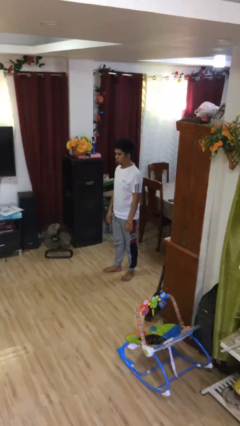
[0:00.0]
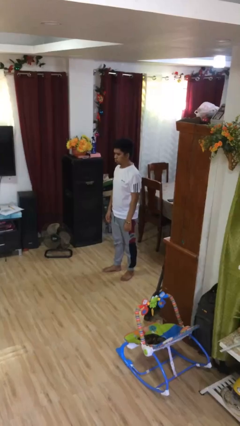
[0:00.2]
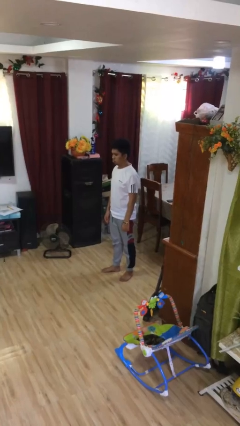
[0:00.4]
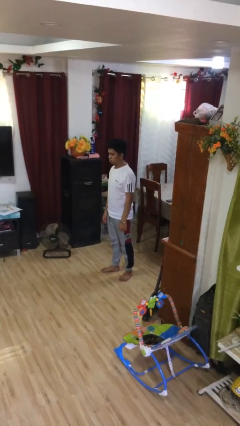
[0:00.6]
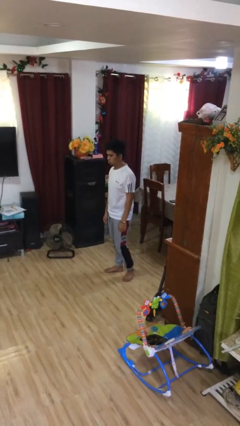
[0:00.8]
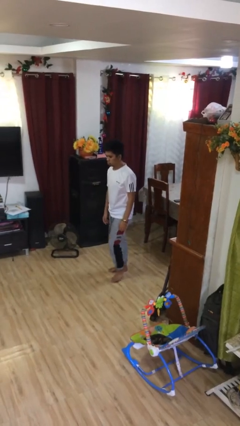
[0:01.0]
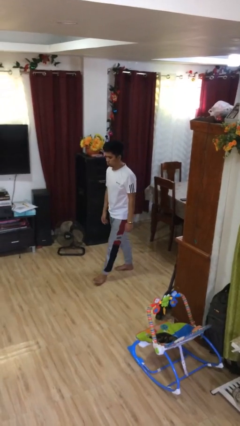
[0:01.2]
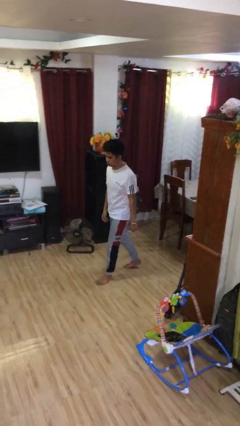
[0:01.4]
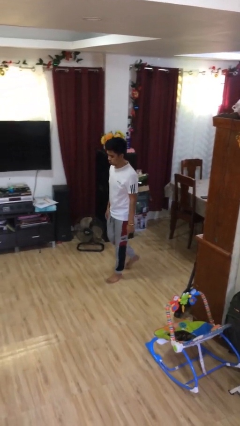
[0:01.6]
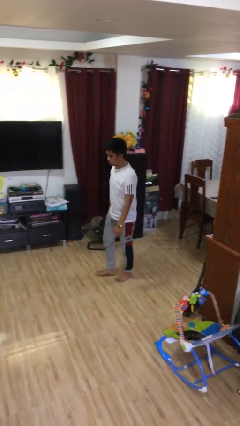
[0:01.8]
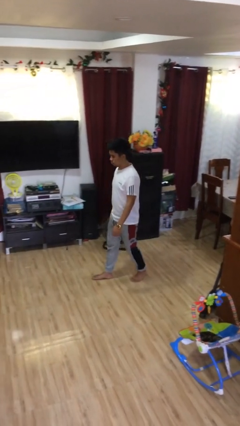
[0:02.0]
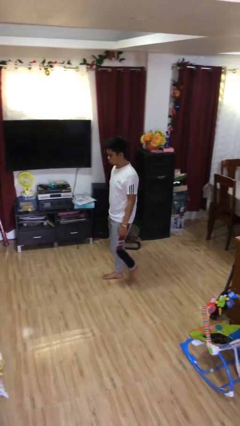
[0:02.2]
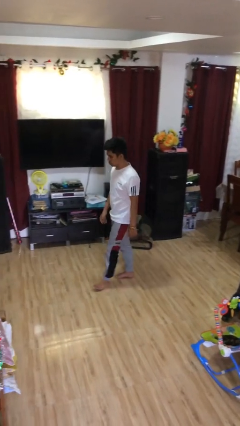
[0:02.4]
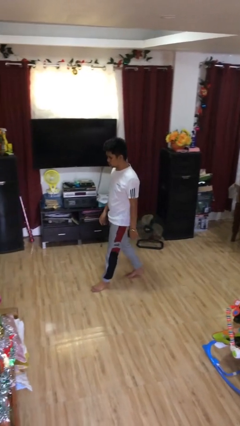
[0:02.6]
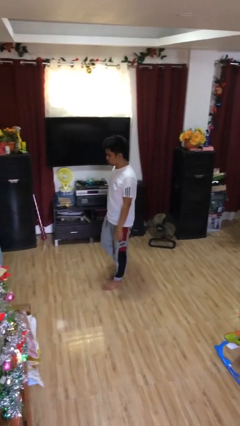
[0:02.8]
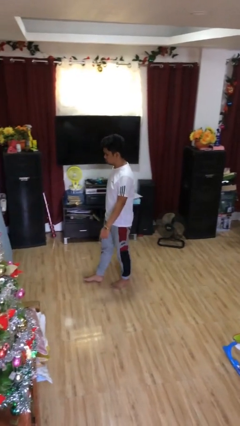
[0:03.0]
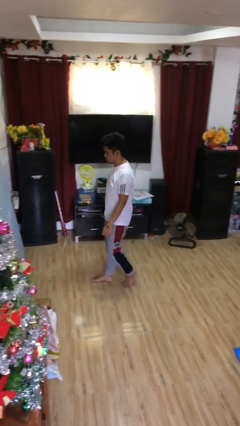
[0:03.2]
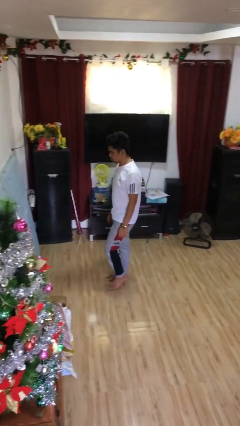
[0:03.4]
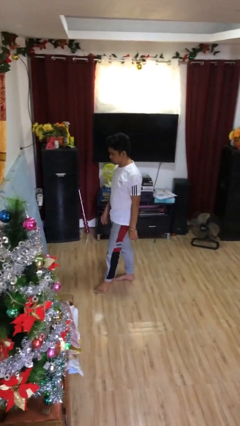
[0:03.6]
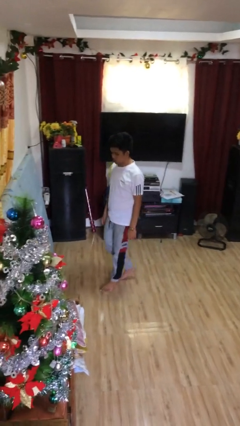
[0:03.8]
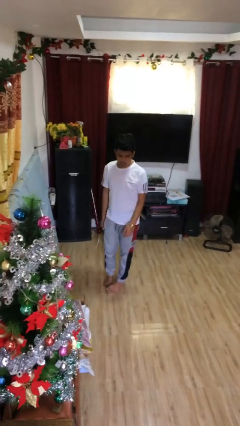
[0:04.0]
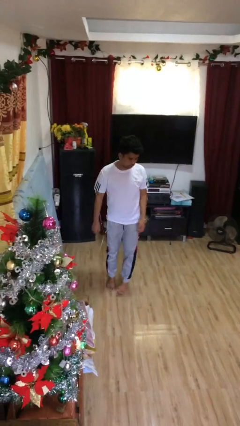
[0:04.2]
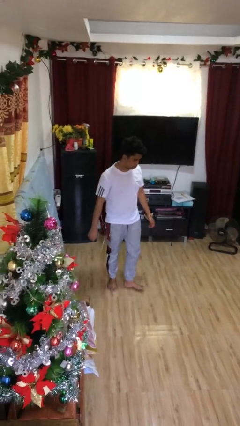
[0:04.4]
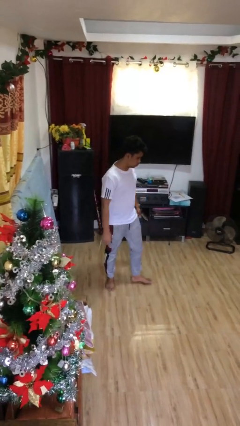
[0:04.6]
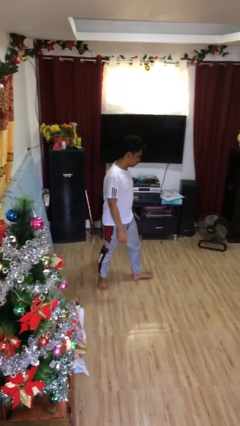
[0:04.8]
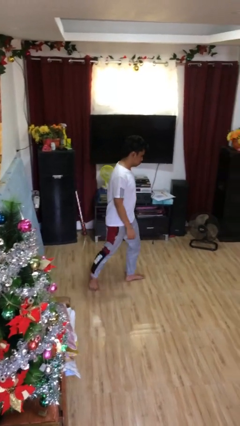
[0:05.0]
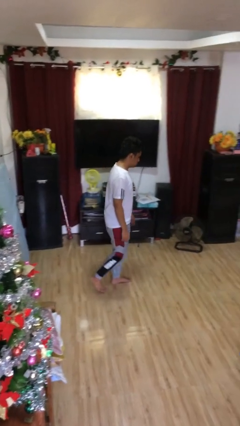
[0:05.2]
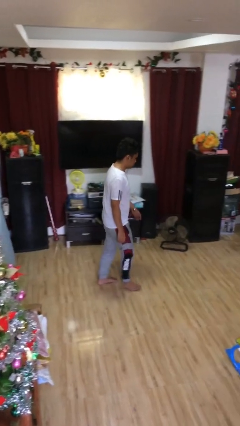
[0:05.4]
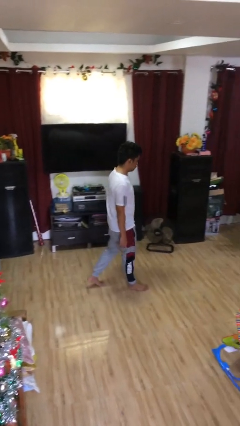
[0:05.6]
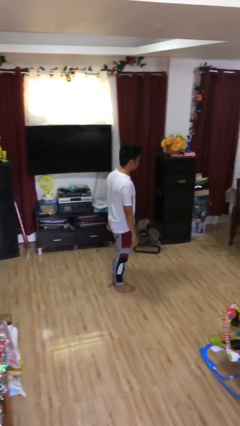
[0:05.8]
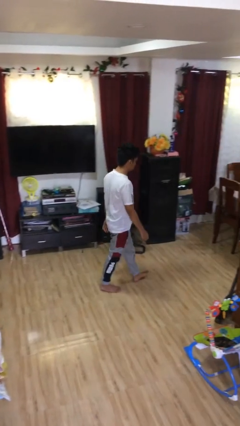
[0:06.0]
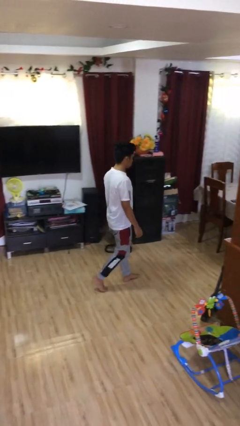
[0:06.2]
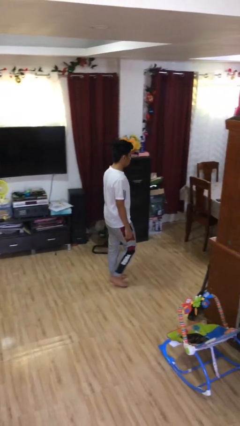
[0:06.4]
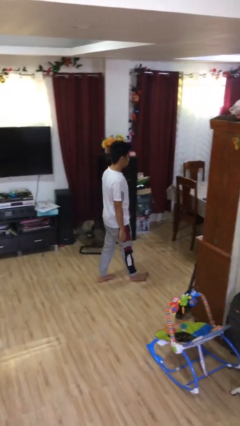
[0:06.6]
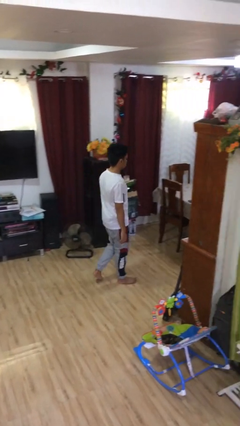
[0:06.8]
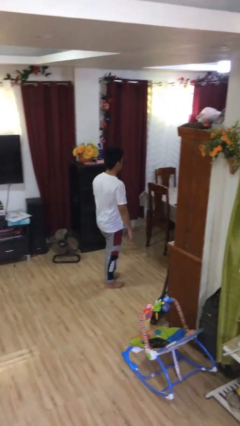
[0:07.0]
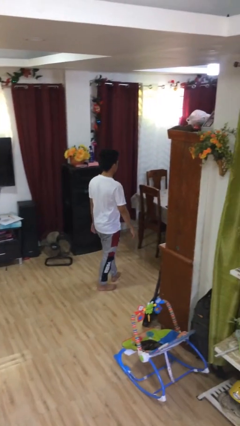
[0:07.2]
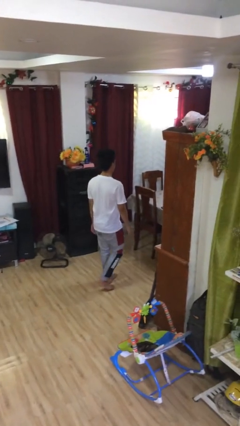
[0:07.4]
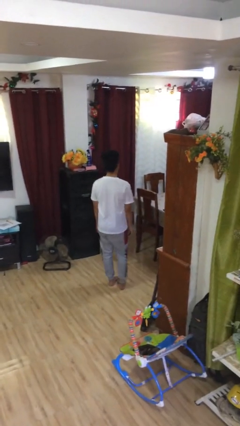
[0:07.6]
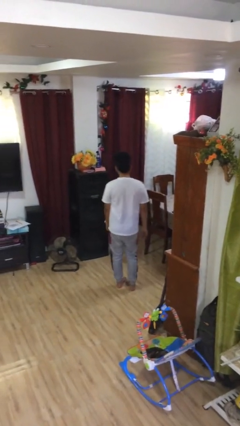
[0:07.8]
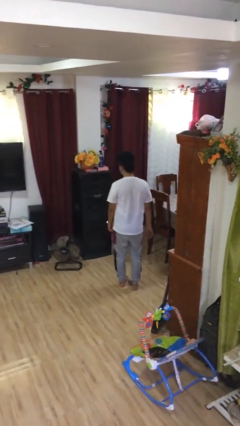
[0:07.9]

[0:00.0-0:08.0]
person walks

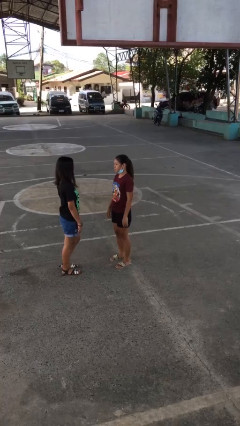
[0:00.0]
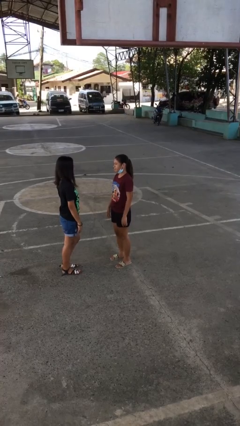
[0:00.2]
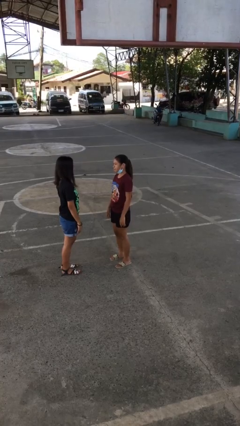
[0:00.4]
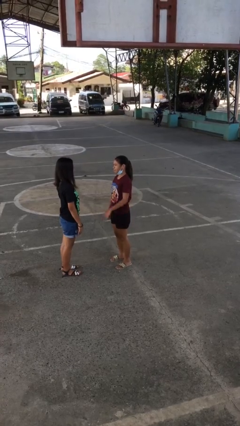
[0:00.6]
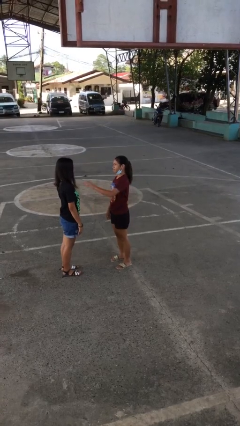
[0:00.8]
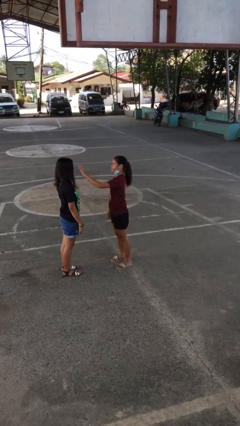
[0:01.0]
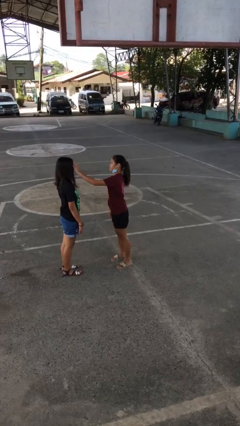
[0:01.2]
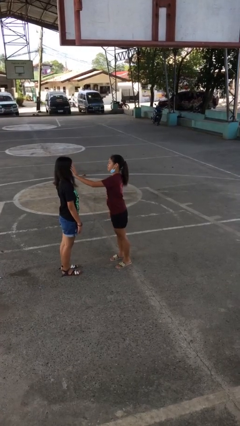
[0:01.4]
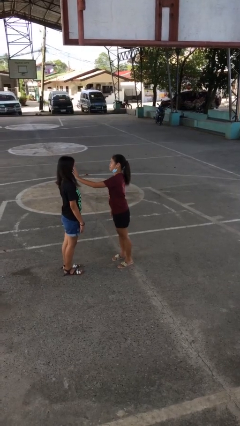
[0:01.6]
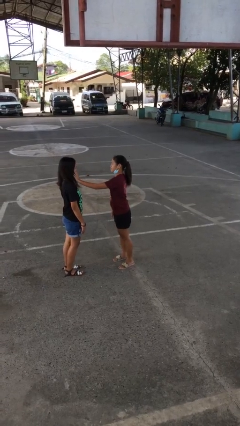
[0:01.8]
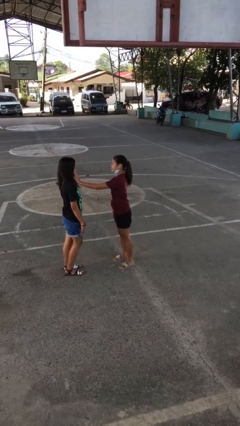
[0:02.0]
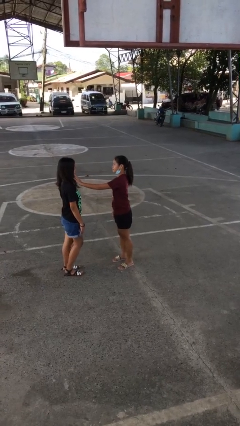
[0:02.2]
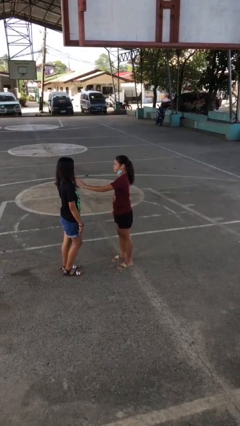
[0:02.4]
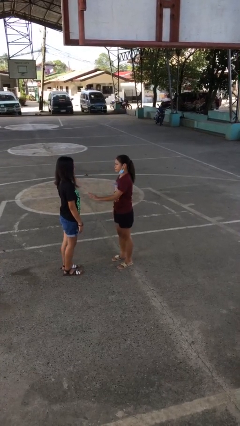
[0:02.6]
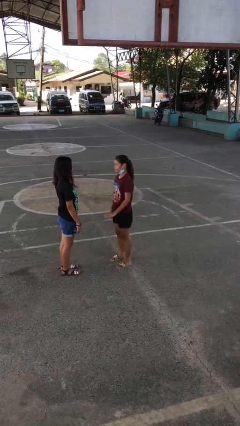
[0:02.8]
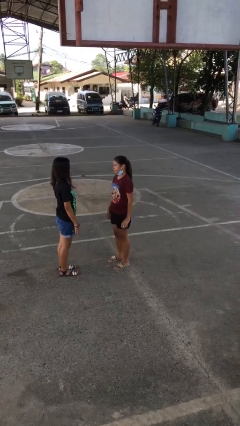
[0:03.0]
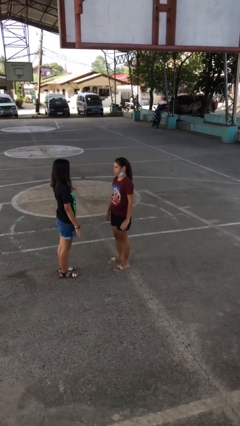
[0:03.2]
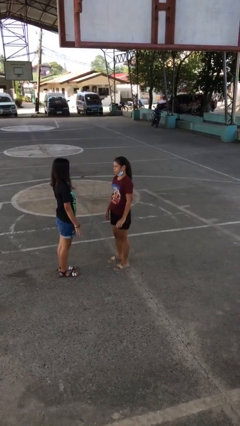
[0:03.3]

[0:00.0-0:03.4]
person touches face of person

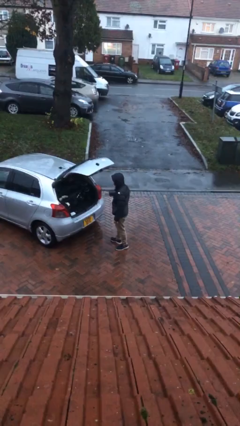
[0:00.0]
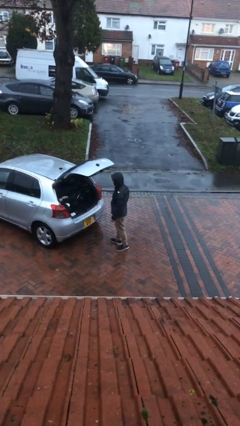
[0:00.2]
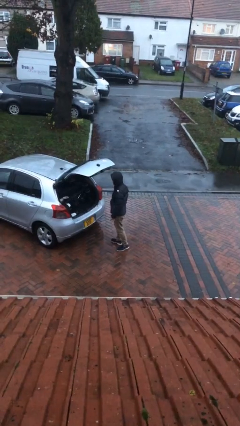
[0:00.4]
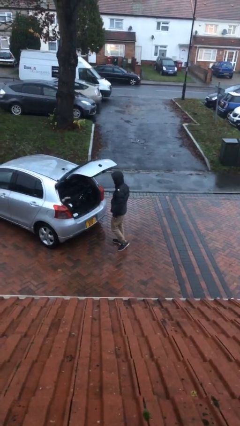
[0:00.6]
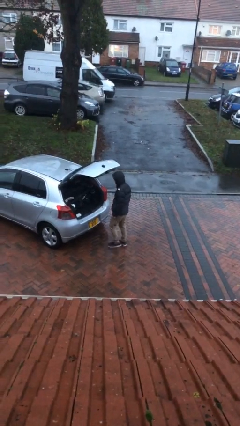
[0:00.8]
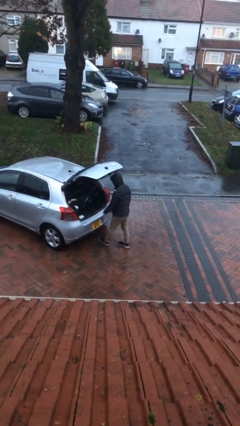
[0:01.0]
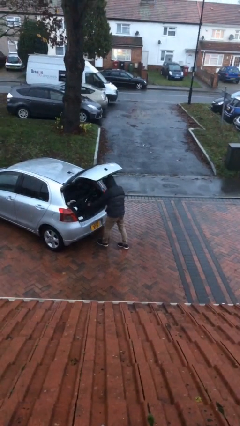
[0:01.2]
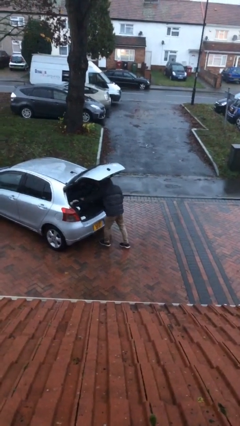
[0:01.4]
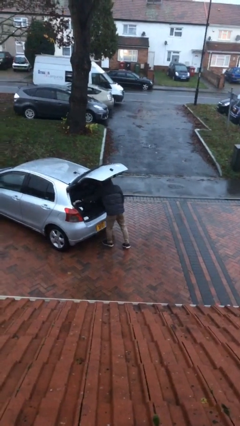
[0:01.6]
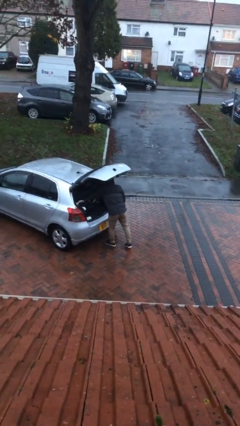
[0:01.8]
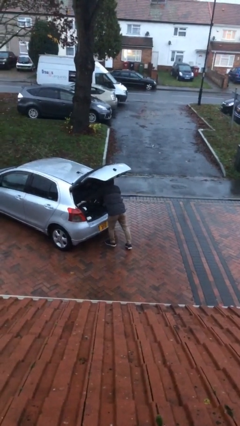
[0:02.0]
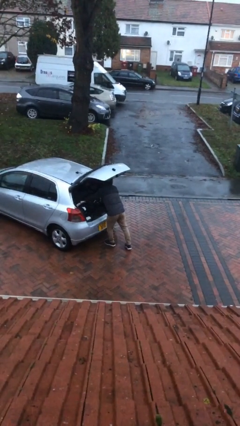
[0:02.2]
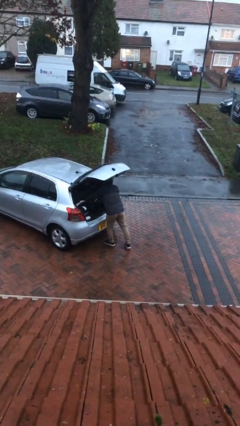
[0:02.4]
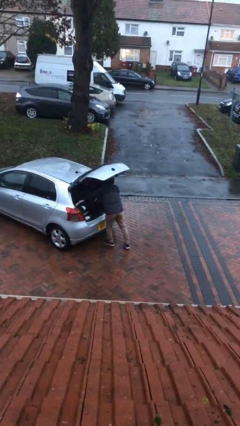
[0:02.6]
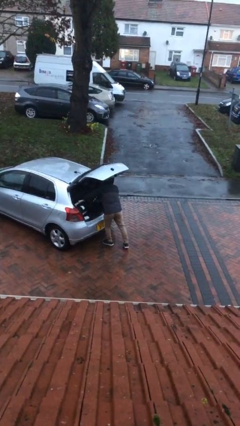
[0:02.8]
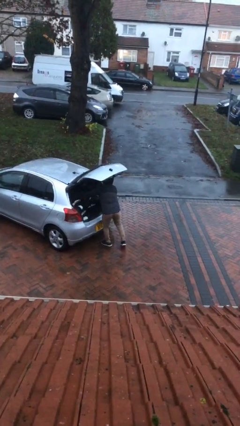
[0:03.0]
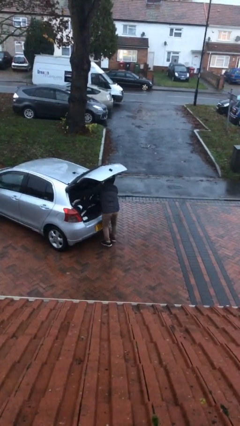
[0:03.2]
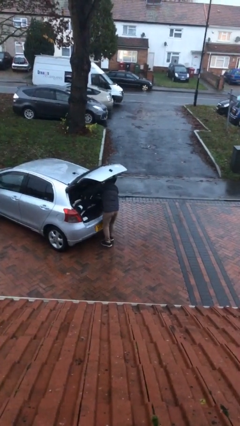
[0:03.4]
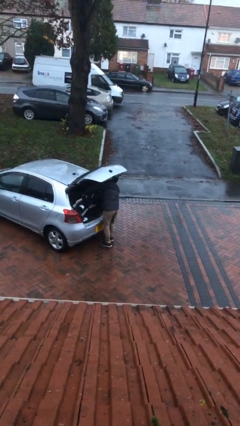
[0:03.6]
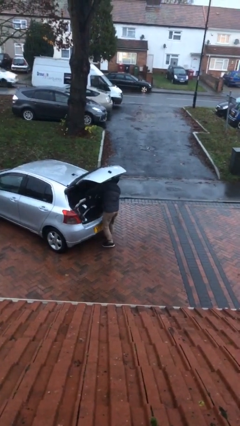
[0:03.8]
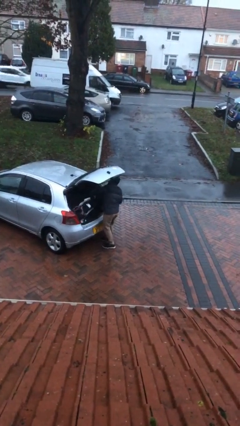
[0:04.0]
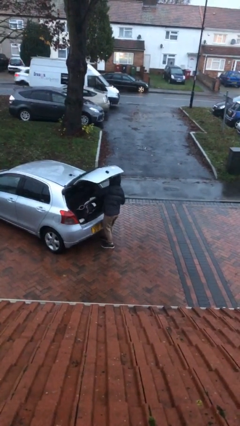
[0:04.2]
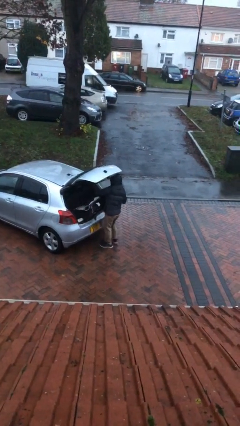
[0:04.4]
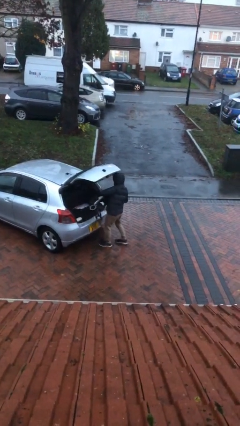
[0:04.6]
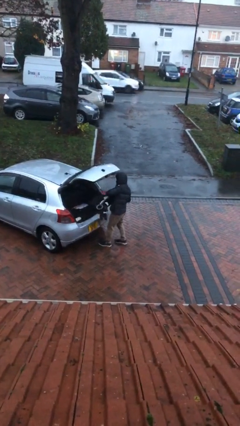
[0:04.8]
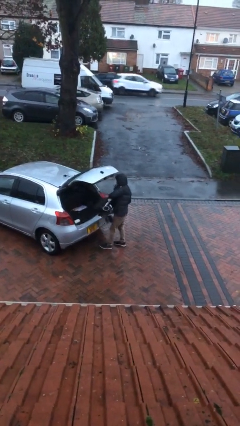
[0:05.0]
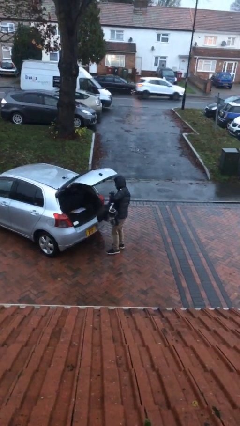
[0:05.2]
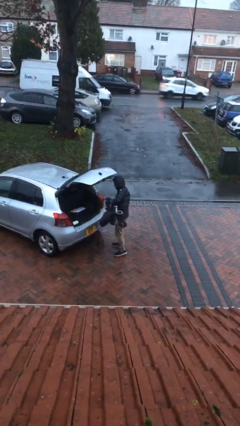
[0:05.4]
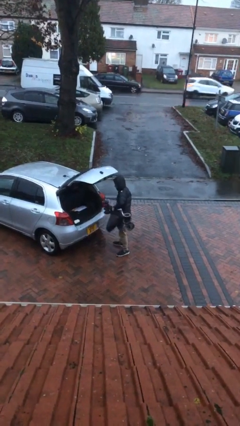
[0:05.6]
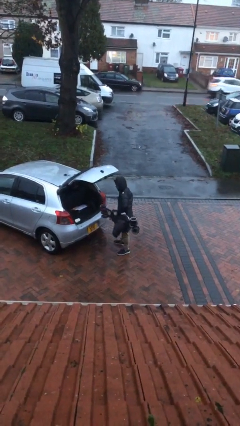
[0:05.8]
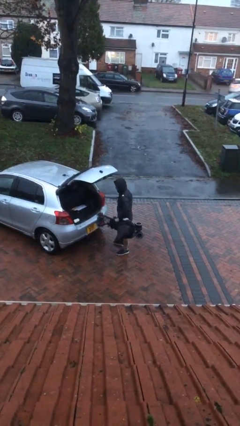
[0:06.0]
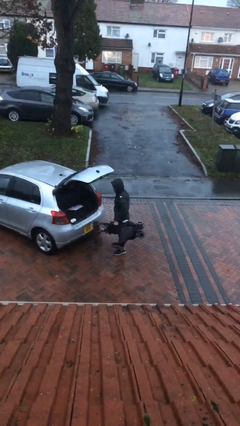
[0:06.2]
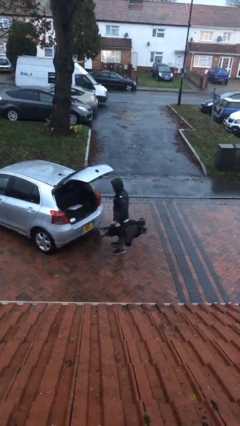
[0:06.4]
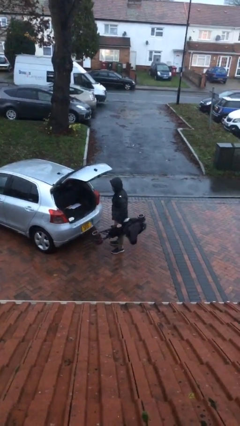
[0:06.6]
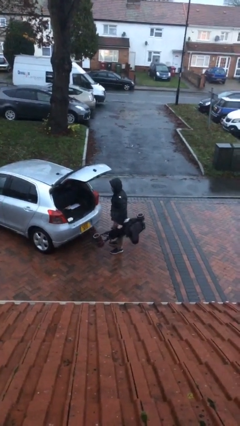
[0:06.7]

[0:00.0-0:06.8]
person unloads car
